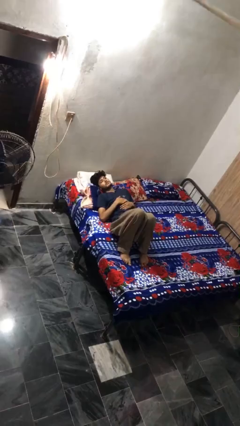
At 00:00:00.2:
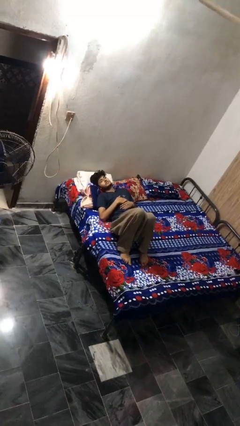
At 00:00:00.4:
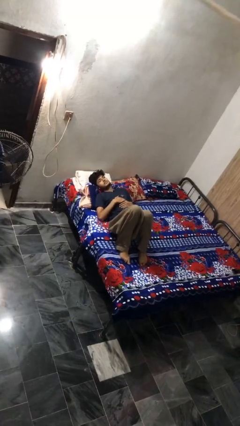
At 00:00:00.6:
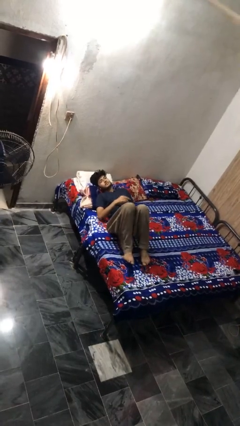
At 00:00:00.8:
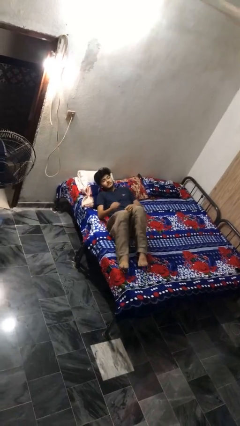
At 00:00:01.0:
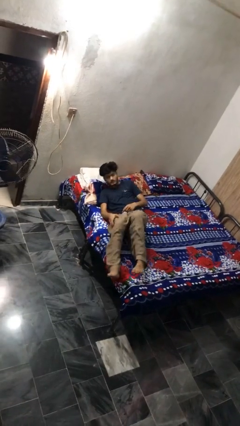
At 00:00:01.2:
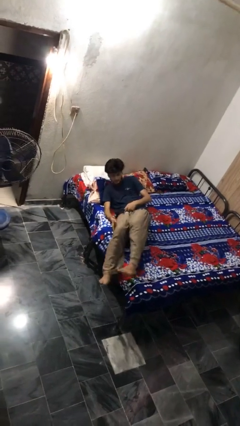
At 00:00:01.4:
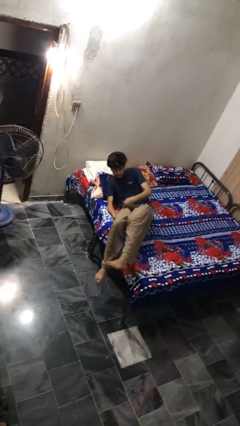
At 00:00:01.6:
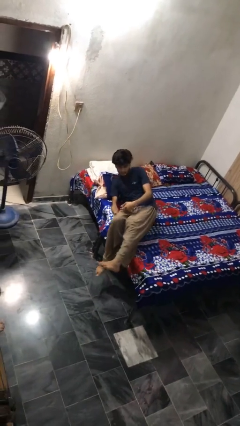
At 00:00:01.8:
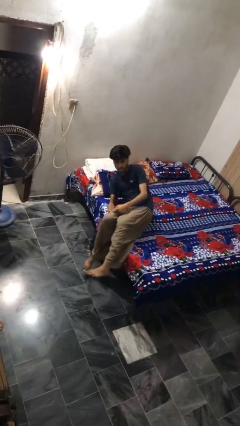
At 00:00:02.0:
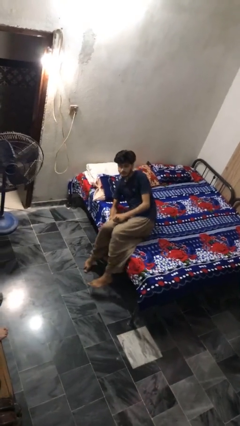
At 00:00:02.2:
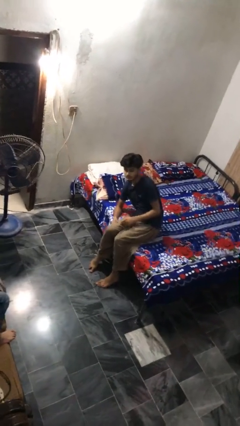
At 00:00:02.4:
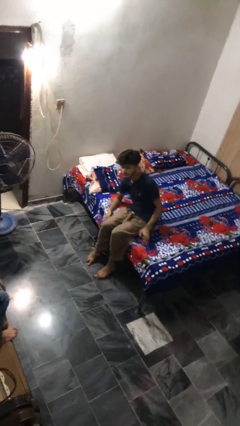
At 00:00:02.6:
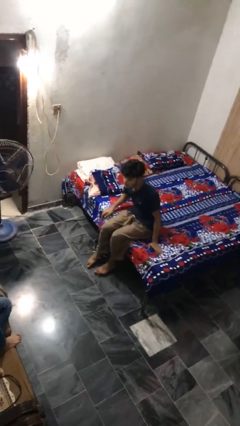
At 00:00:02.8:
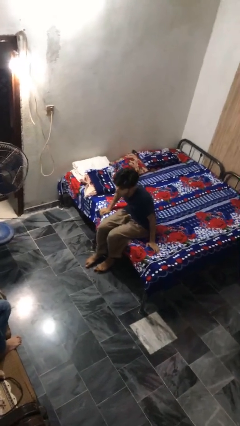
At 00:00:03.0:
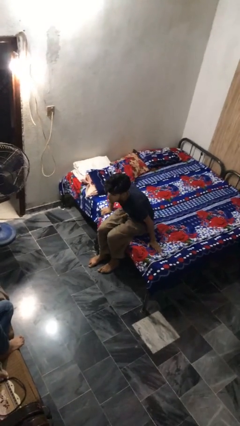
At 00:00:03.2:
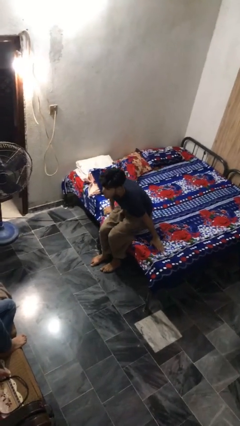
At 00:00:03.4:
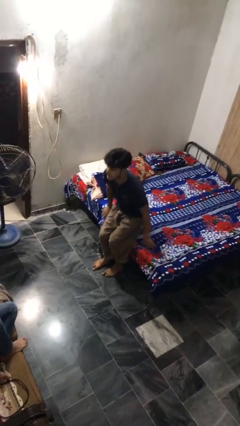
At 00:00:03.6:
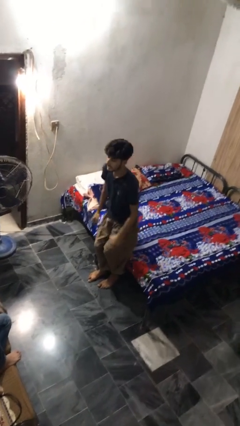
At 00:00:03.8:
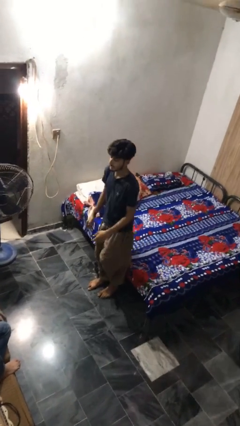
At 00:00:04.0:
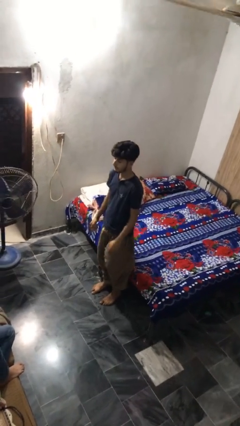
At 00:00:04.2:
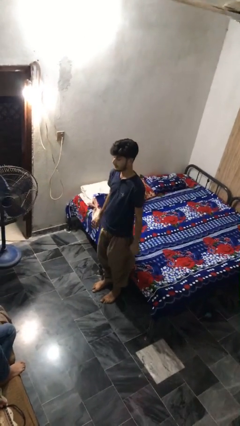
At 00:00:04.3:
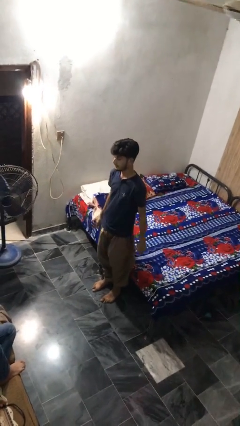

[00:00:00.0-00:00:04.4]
person stands up

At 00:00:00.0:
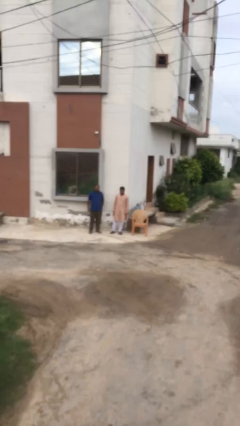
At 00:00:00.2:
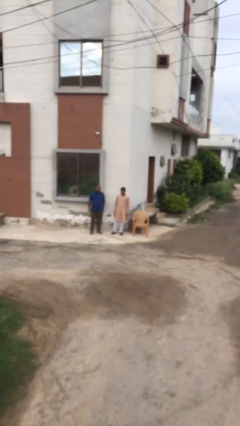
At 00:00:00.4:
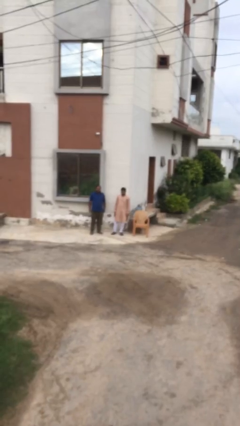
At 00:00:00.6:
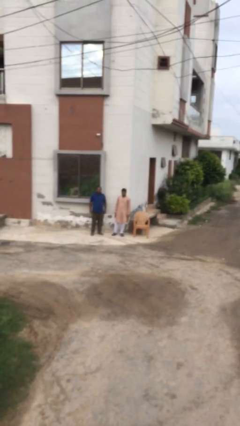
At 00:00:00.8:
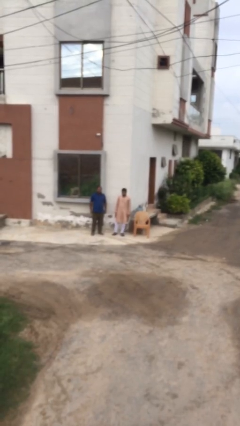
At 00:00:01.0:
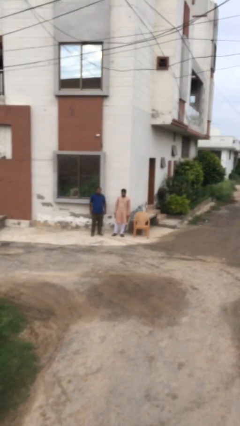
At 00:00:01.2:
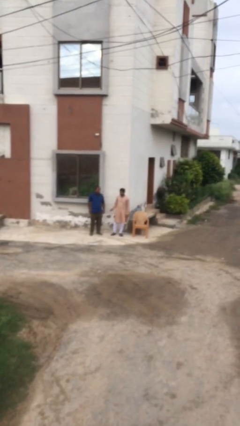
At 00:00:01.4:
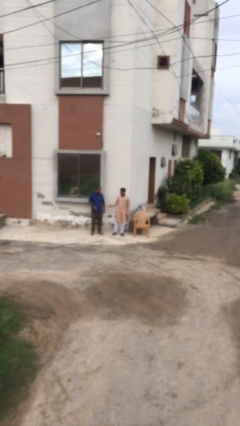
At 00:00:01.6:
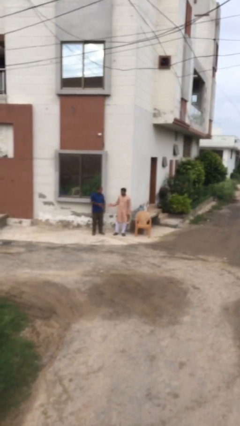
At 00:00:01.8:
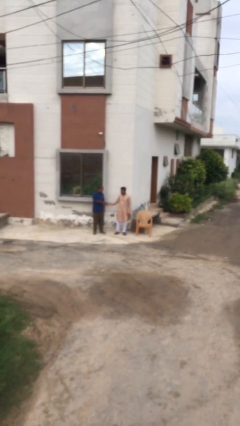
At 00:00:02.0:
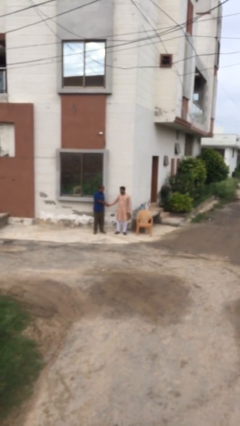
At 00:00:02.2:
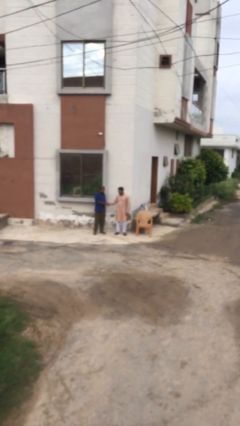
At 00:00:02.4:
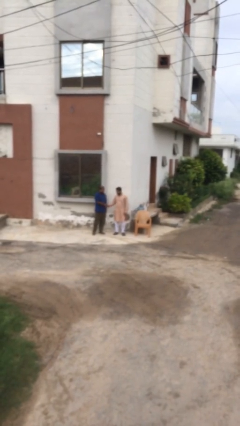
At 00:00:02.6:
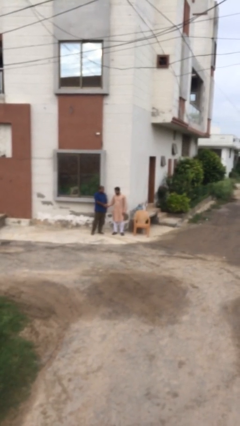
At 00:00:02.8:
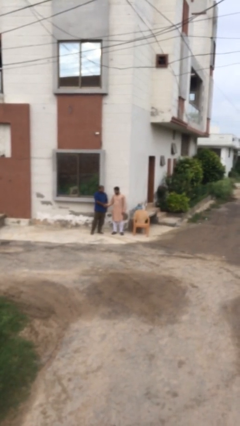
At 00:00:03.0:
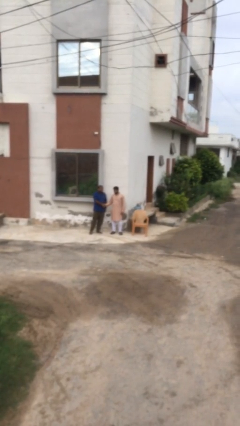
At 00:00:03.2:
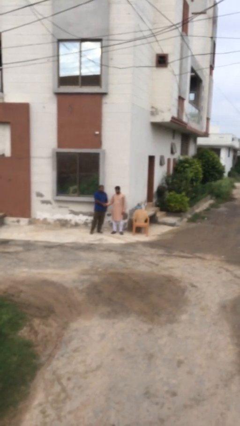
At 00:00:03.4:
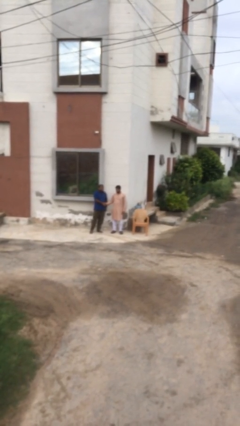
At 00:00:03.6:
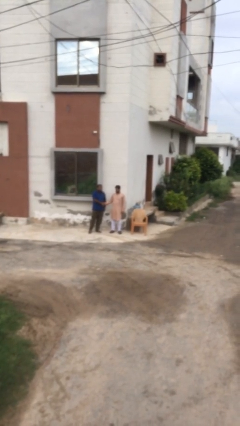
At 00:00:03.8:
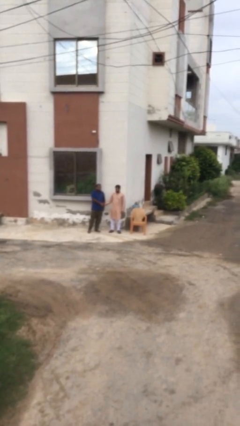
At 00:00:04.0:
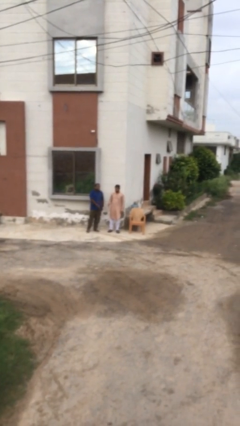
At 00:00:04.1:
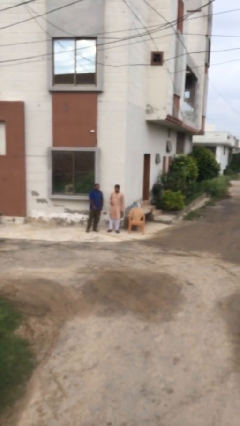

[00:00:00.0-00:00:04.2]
person shakes hand

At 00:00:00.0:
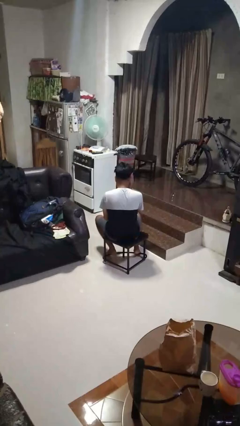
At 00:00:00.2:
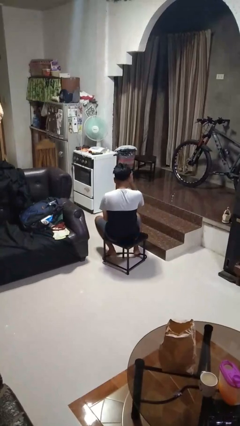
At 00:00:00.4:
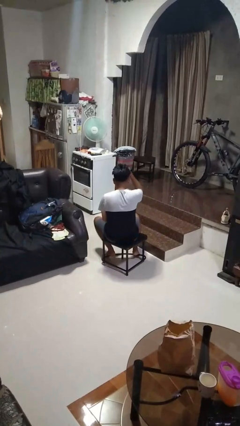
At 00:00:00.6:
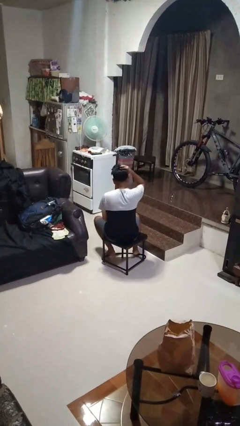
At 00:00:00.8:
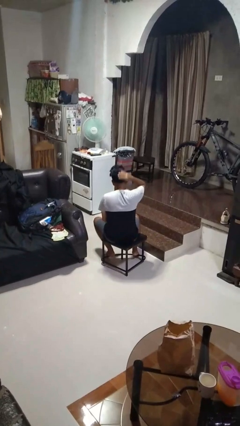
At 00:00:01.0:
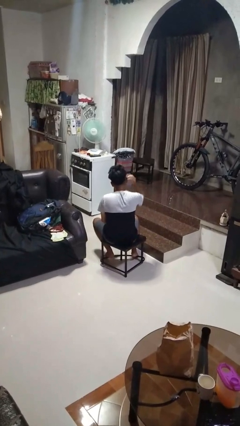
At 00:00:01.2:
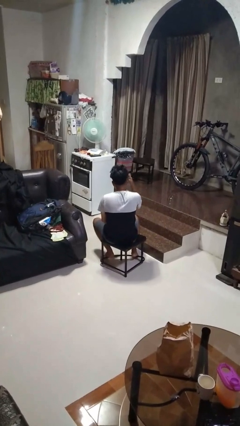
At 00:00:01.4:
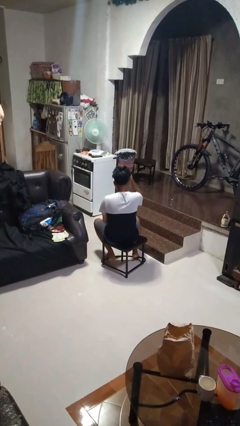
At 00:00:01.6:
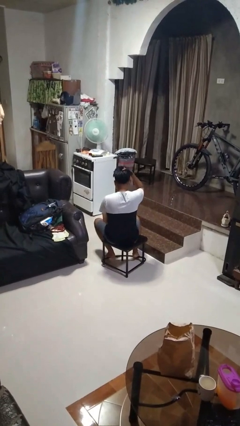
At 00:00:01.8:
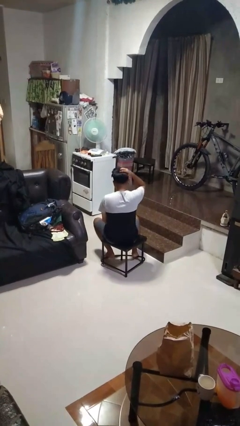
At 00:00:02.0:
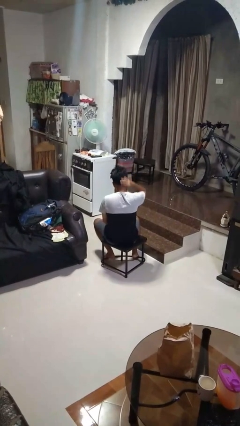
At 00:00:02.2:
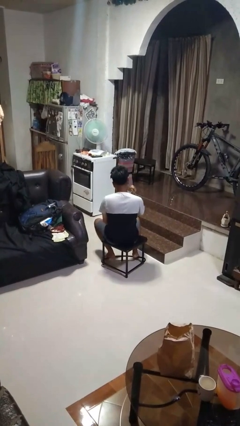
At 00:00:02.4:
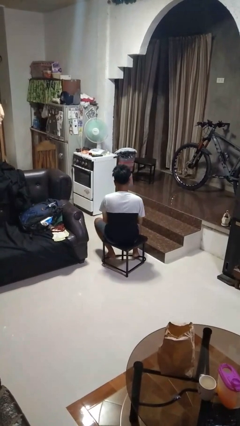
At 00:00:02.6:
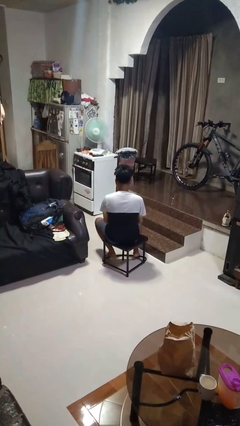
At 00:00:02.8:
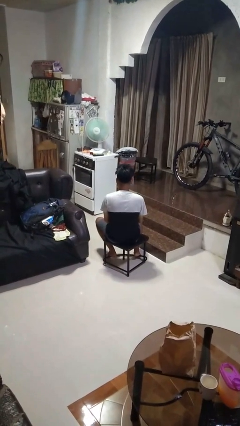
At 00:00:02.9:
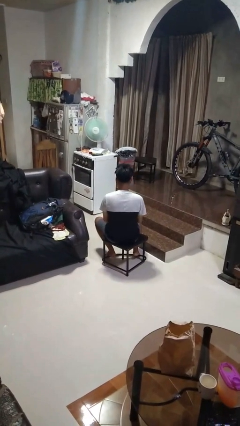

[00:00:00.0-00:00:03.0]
person strokes hair

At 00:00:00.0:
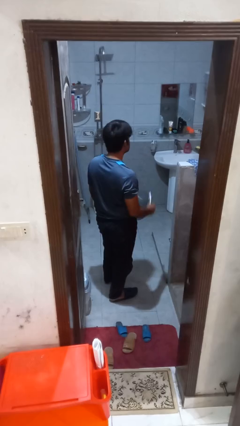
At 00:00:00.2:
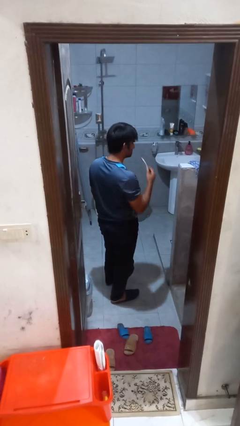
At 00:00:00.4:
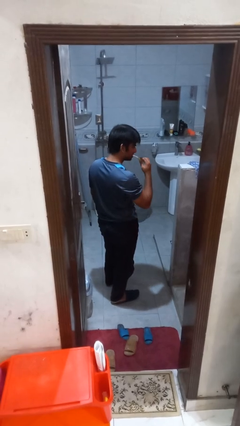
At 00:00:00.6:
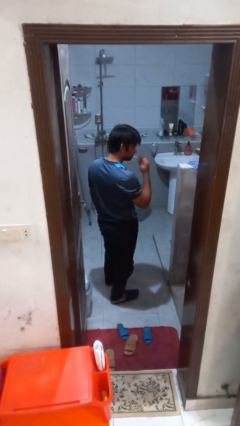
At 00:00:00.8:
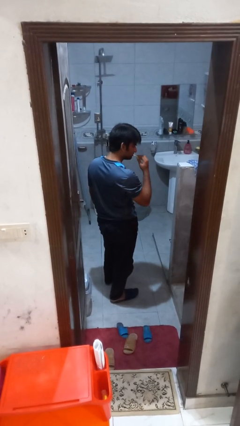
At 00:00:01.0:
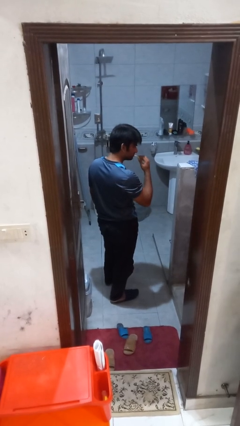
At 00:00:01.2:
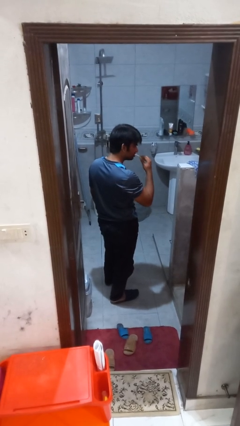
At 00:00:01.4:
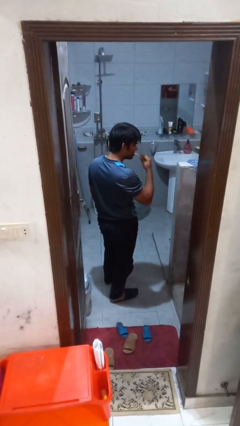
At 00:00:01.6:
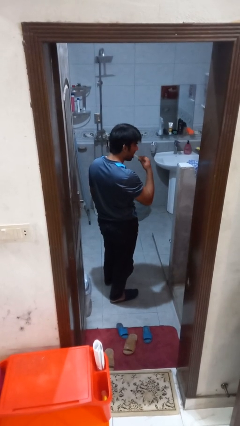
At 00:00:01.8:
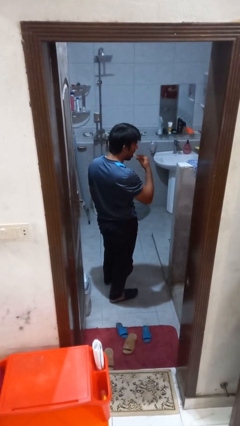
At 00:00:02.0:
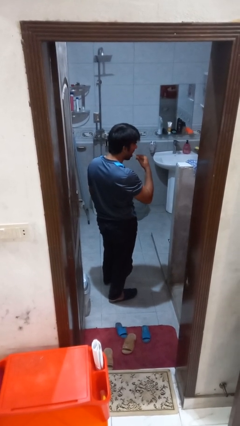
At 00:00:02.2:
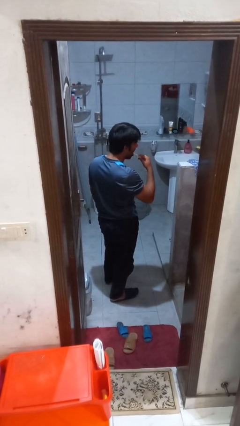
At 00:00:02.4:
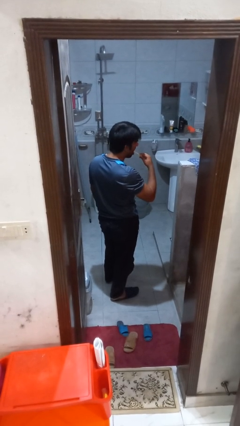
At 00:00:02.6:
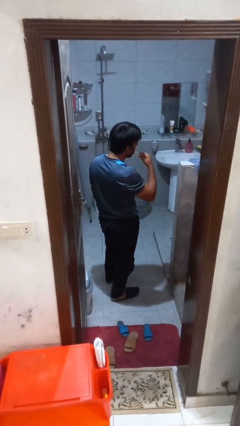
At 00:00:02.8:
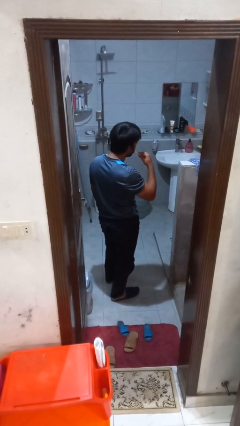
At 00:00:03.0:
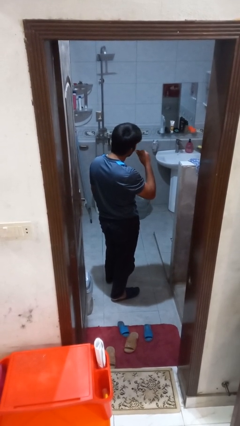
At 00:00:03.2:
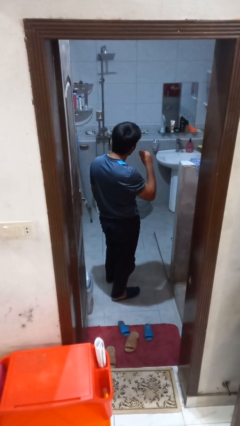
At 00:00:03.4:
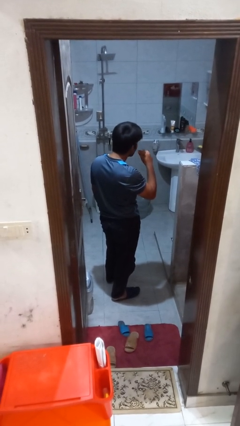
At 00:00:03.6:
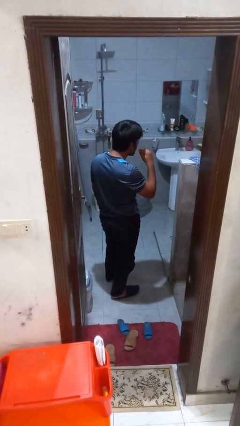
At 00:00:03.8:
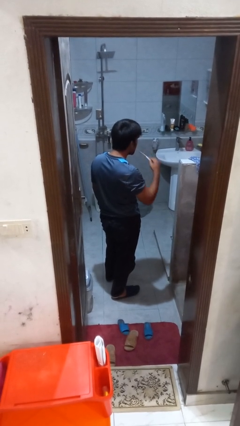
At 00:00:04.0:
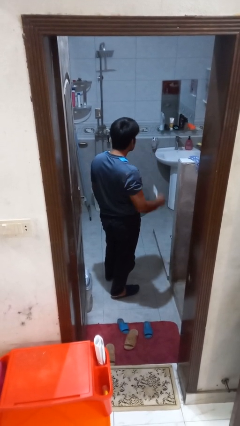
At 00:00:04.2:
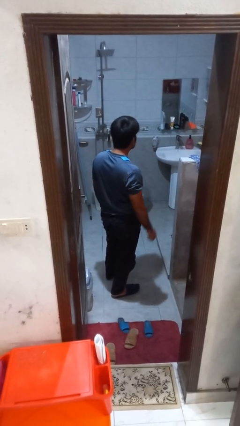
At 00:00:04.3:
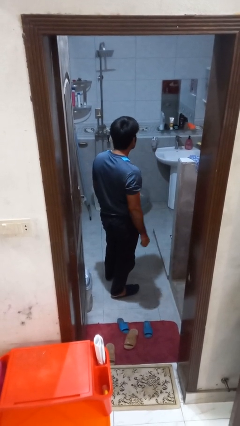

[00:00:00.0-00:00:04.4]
person brushes teeth

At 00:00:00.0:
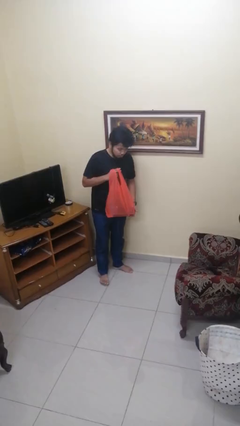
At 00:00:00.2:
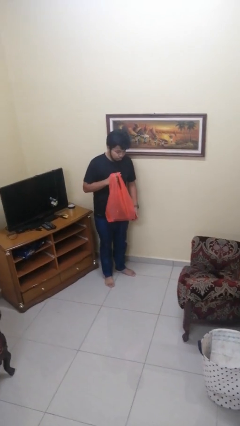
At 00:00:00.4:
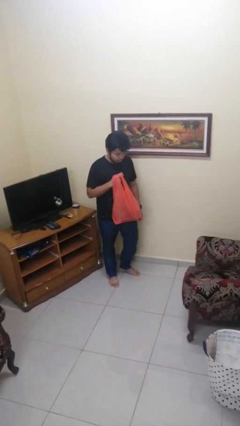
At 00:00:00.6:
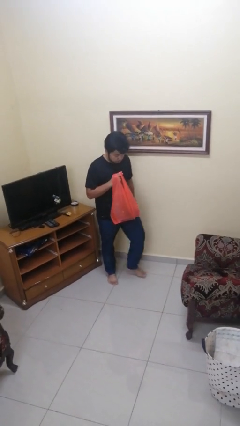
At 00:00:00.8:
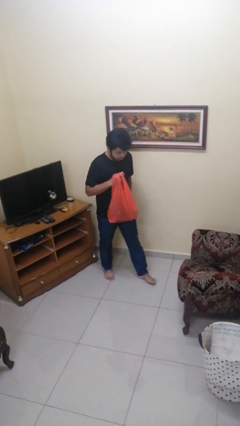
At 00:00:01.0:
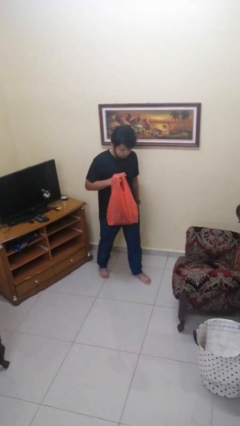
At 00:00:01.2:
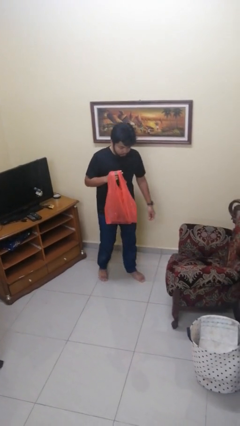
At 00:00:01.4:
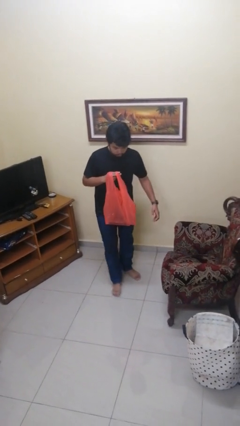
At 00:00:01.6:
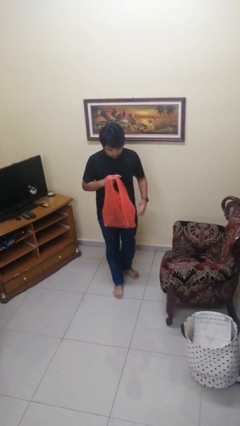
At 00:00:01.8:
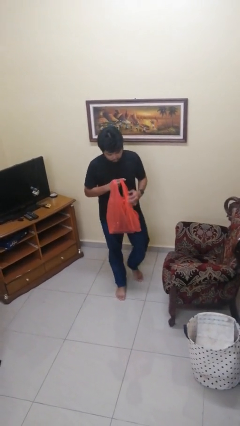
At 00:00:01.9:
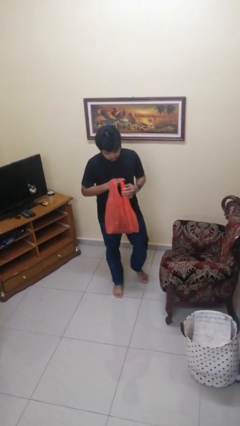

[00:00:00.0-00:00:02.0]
person carries groceries
